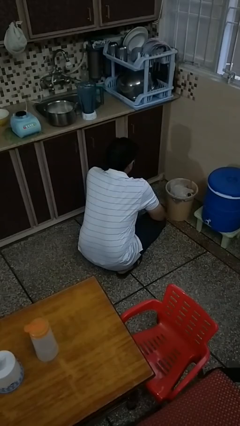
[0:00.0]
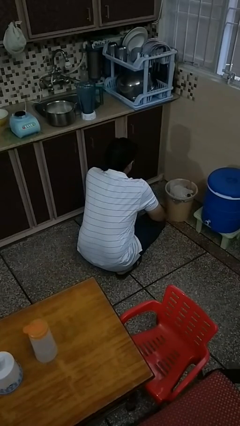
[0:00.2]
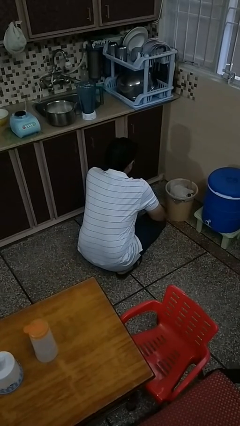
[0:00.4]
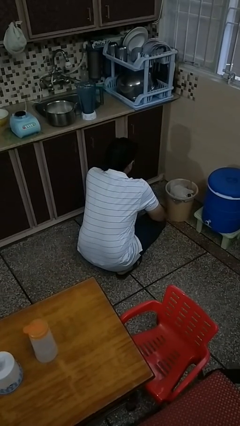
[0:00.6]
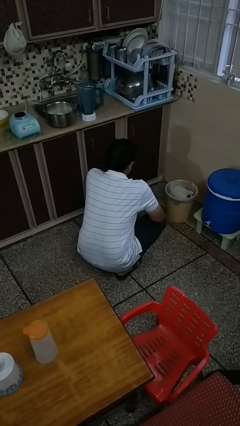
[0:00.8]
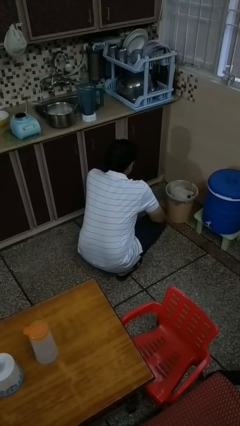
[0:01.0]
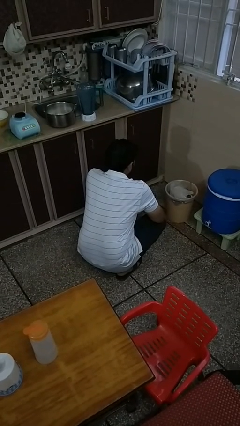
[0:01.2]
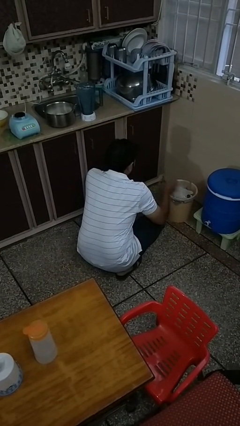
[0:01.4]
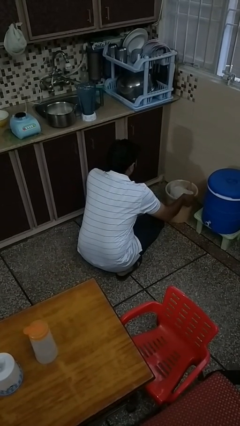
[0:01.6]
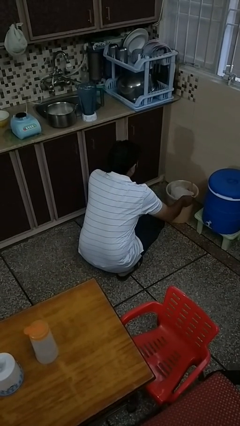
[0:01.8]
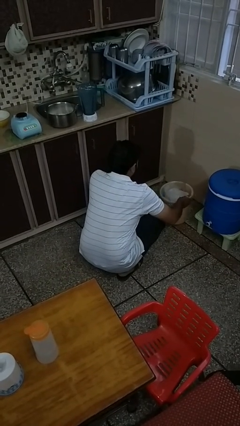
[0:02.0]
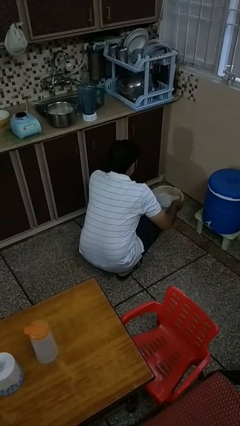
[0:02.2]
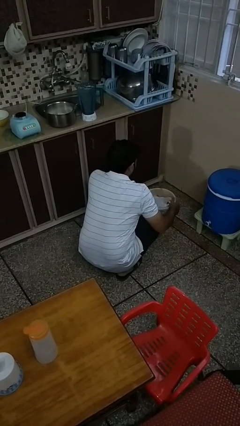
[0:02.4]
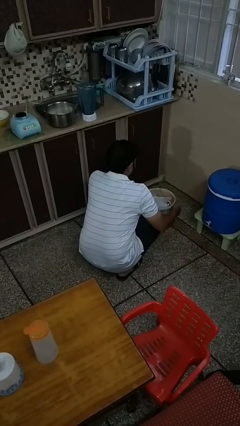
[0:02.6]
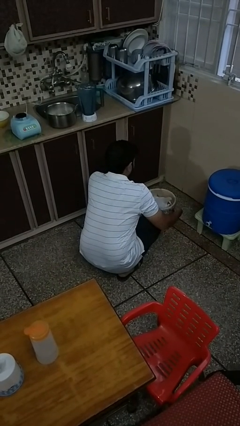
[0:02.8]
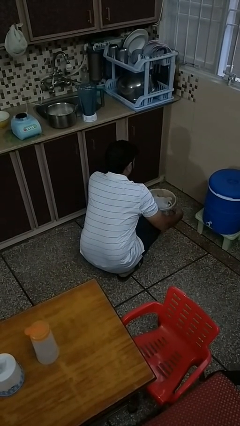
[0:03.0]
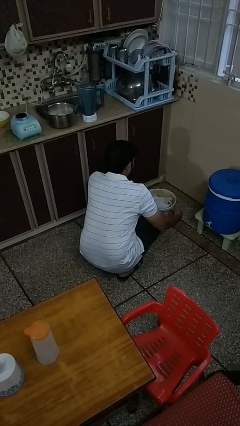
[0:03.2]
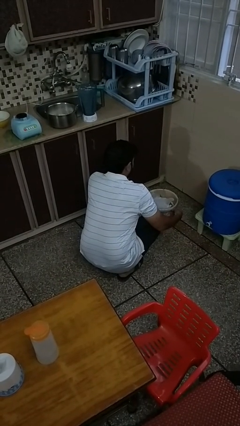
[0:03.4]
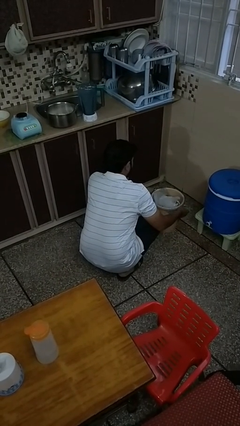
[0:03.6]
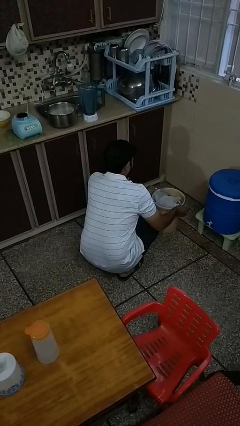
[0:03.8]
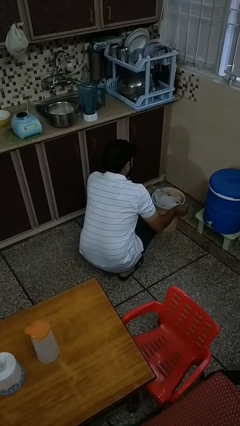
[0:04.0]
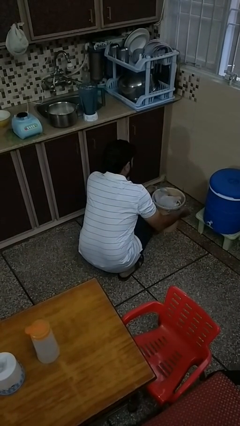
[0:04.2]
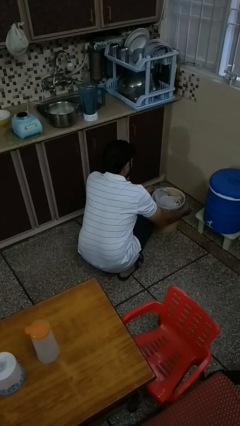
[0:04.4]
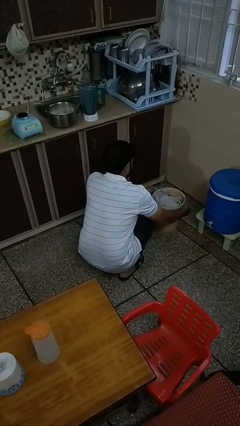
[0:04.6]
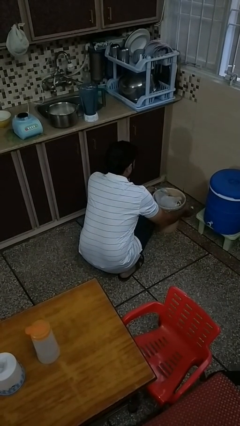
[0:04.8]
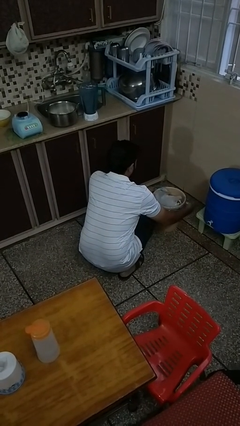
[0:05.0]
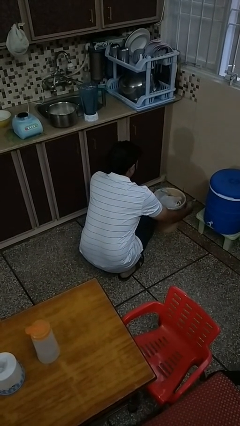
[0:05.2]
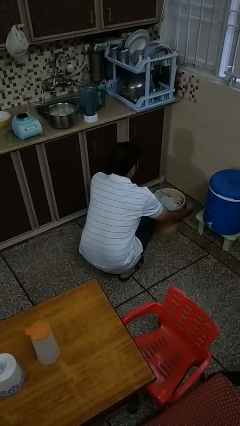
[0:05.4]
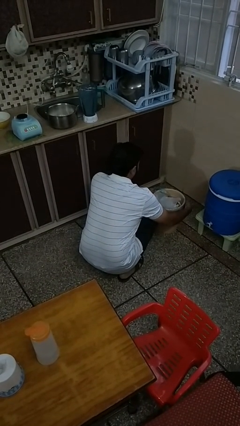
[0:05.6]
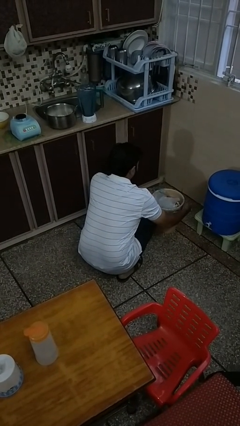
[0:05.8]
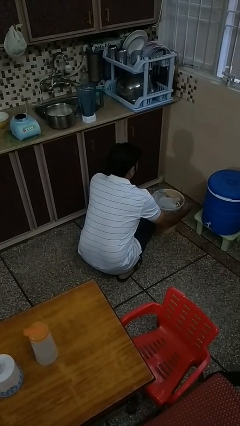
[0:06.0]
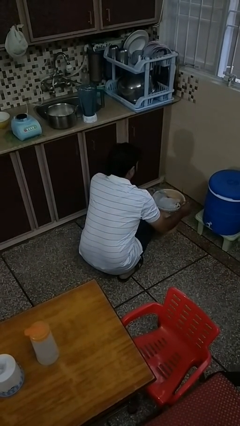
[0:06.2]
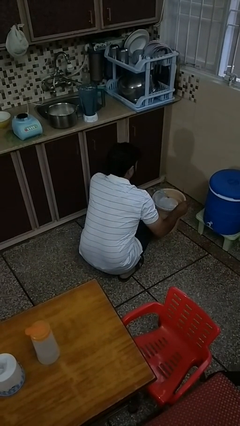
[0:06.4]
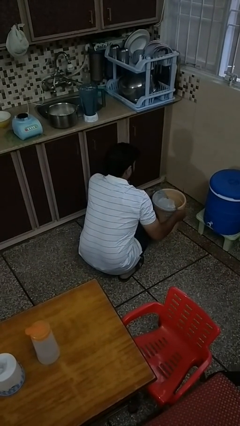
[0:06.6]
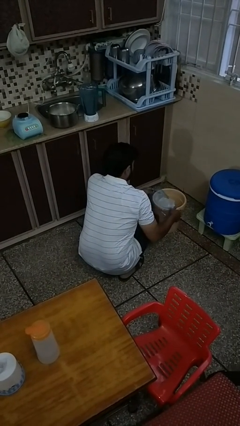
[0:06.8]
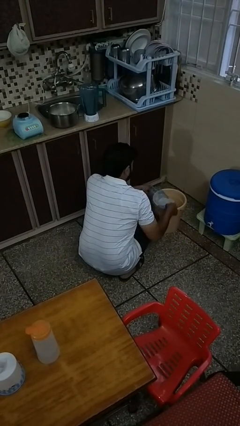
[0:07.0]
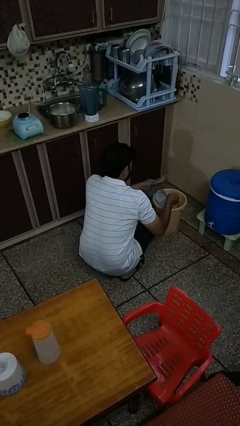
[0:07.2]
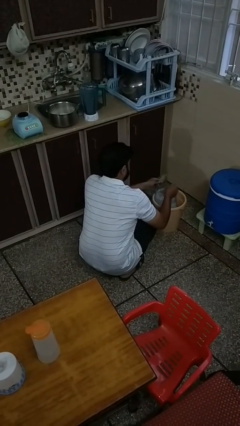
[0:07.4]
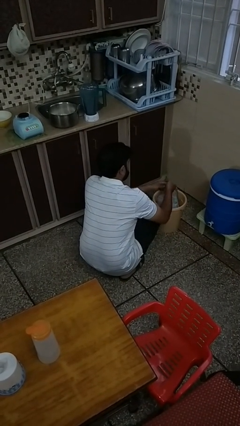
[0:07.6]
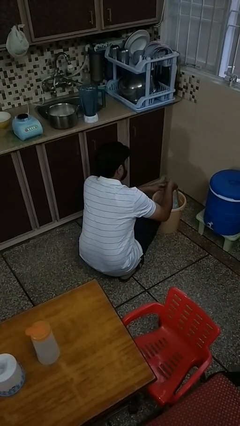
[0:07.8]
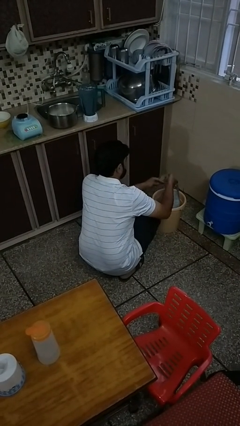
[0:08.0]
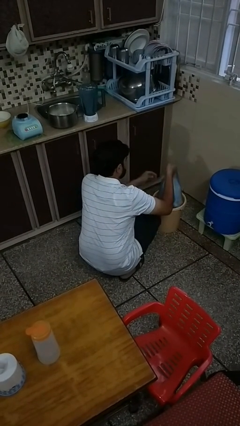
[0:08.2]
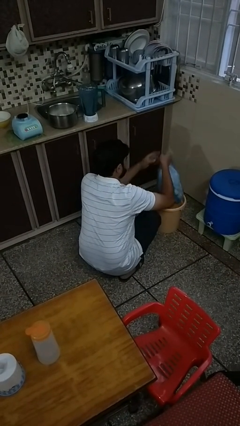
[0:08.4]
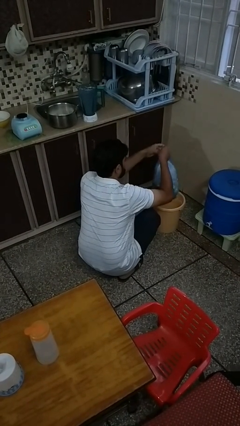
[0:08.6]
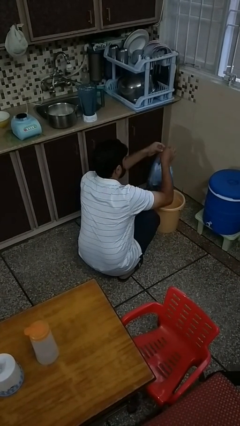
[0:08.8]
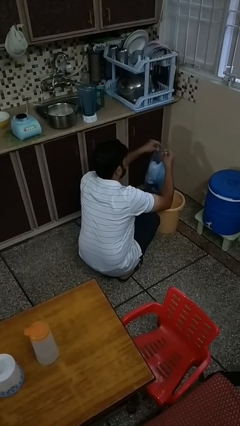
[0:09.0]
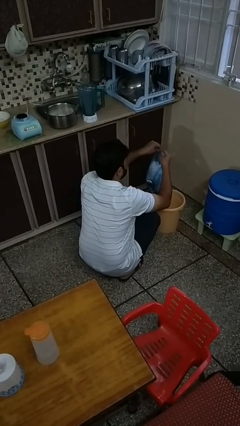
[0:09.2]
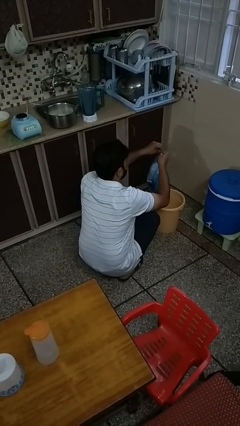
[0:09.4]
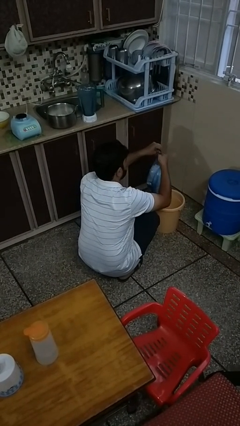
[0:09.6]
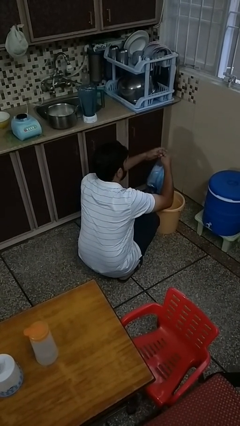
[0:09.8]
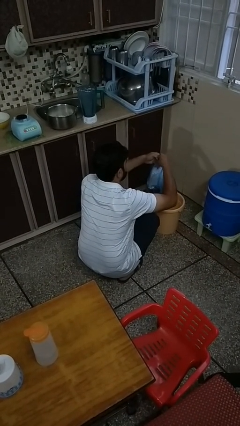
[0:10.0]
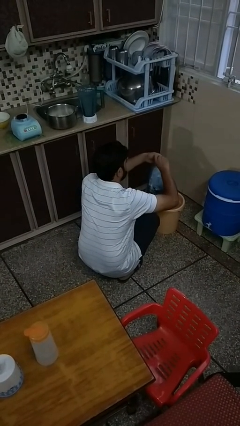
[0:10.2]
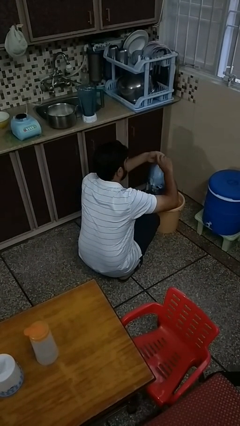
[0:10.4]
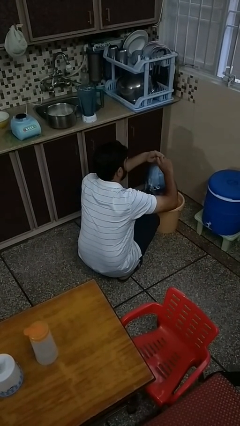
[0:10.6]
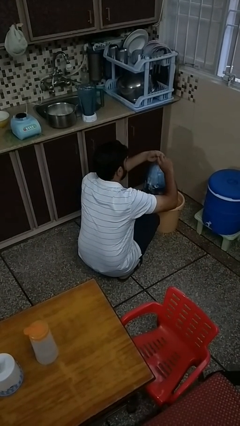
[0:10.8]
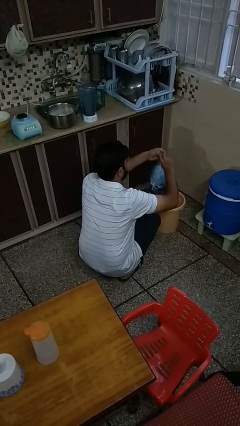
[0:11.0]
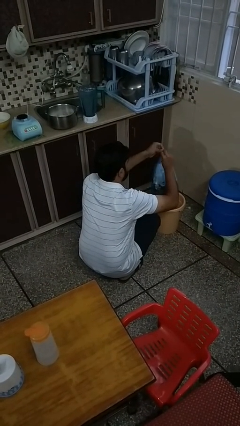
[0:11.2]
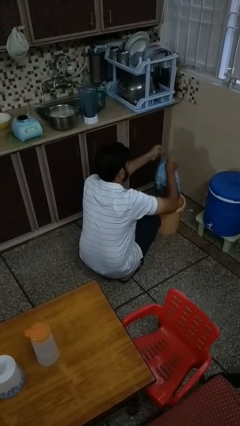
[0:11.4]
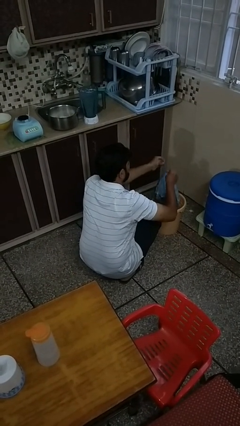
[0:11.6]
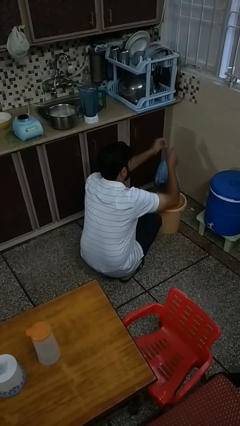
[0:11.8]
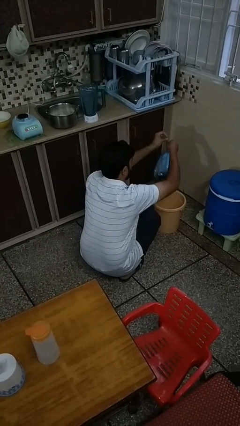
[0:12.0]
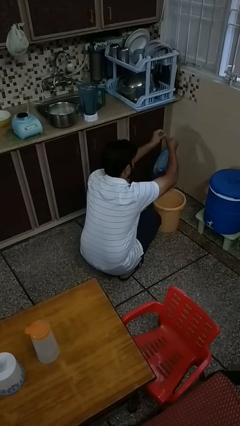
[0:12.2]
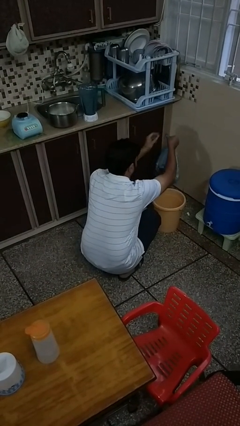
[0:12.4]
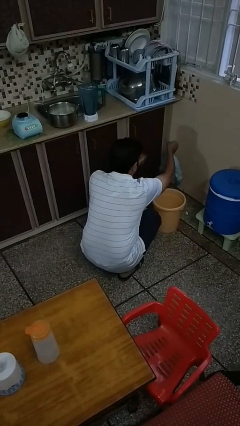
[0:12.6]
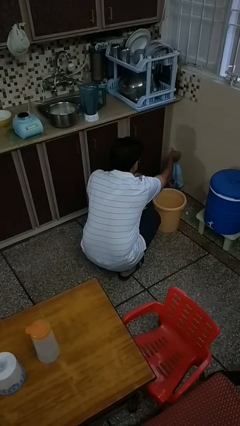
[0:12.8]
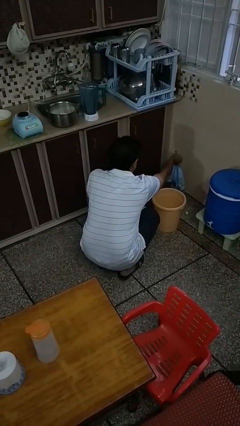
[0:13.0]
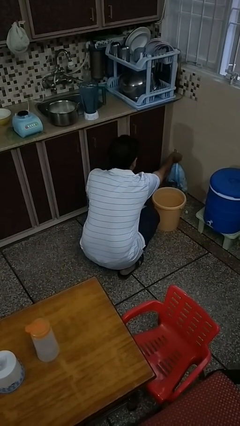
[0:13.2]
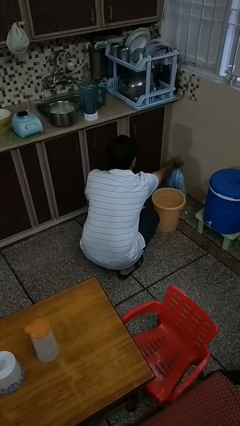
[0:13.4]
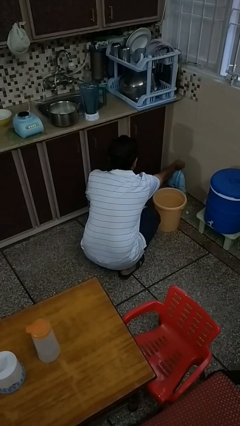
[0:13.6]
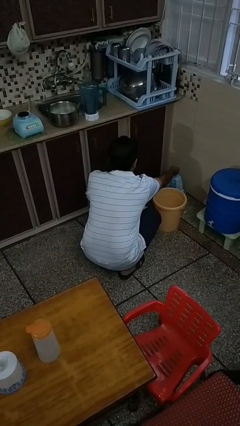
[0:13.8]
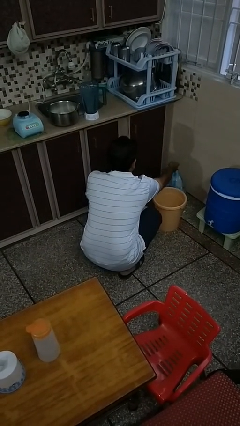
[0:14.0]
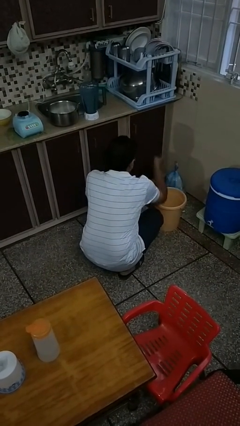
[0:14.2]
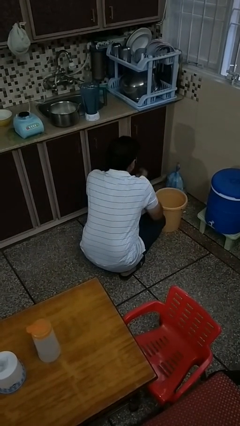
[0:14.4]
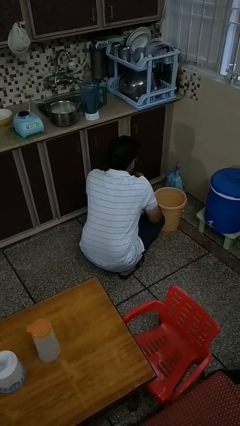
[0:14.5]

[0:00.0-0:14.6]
person removes trashbag from trashcan

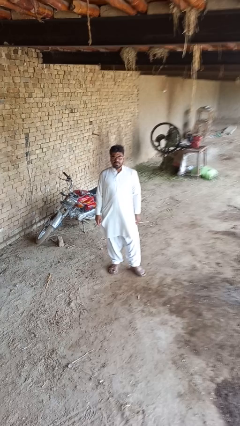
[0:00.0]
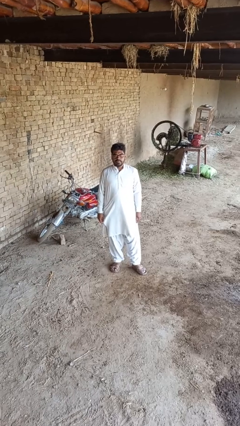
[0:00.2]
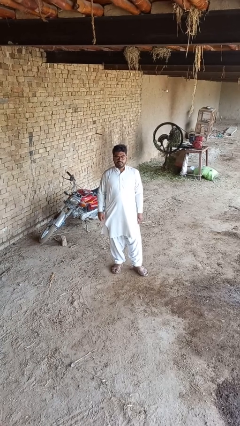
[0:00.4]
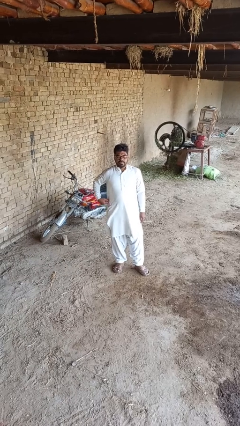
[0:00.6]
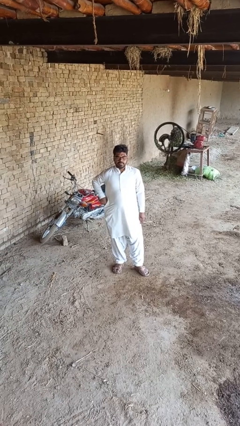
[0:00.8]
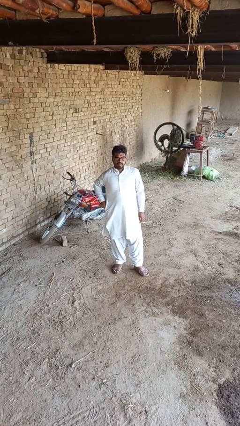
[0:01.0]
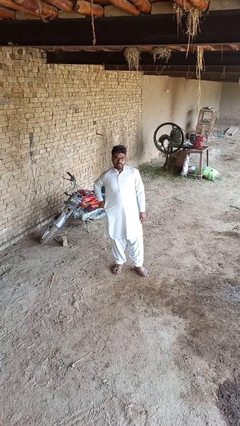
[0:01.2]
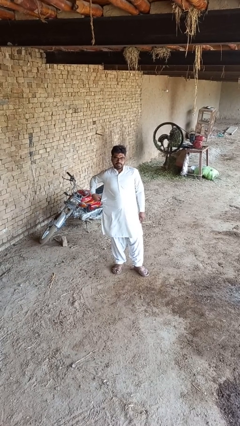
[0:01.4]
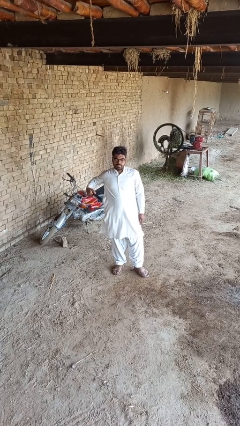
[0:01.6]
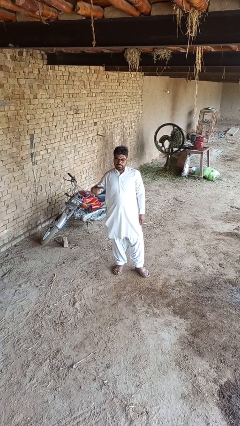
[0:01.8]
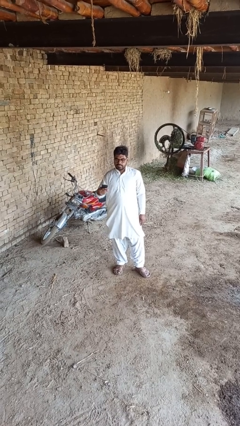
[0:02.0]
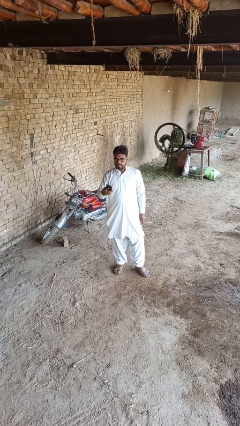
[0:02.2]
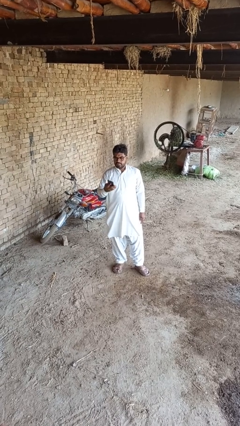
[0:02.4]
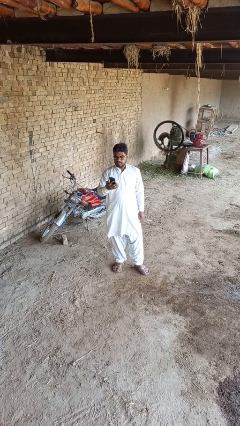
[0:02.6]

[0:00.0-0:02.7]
person takes phone from pocket

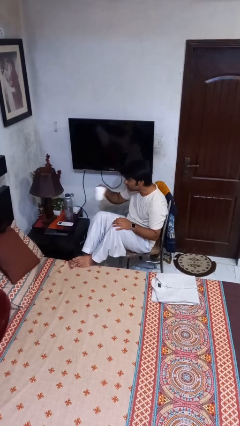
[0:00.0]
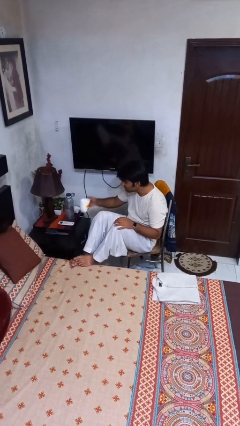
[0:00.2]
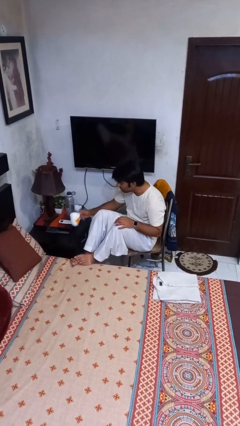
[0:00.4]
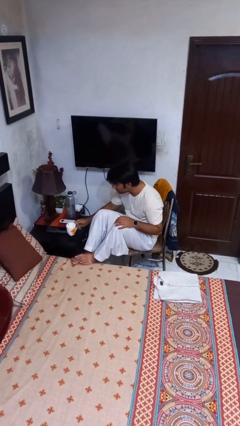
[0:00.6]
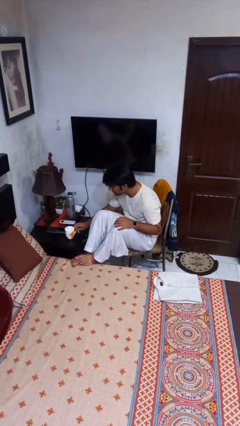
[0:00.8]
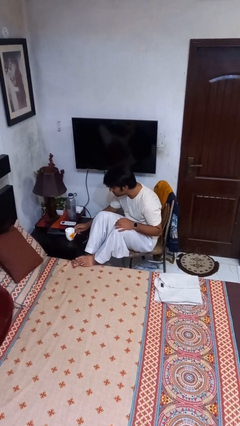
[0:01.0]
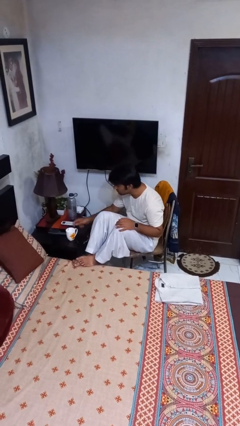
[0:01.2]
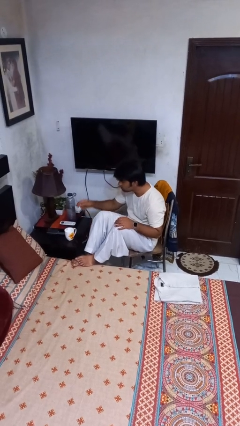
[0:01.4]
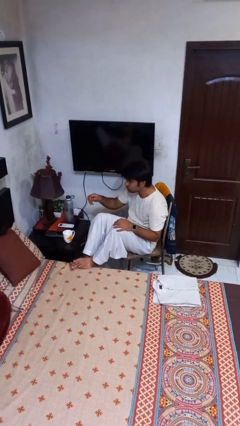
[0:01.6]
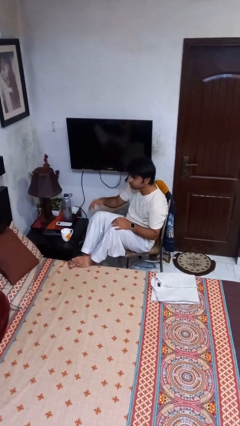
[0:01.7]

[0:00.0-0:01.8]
person puts down object on table
